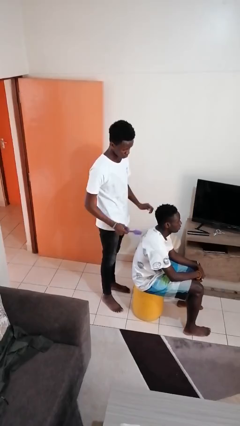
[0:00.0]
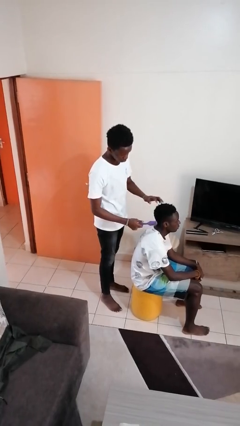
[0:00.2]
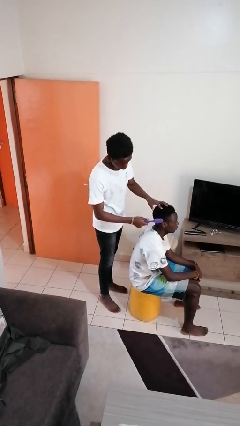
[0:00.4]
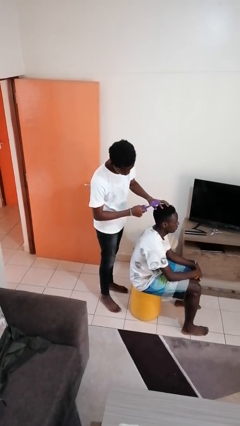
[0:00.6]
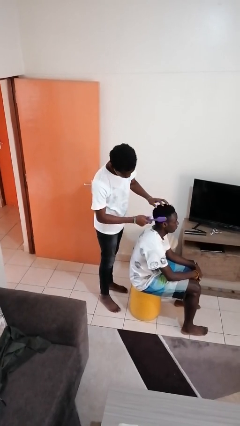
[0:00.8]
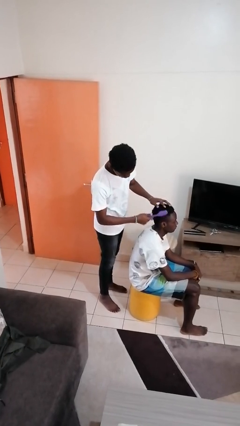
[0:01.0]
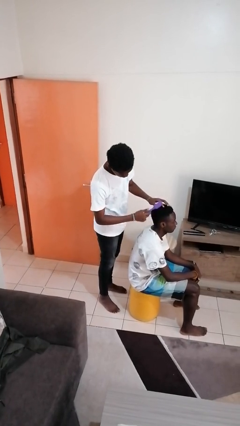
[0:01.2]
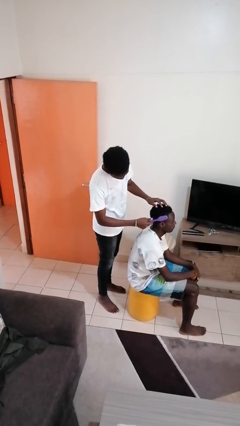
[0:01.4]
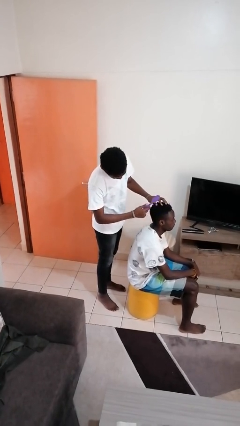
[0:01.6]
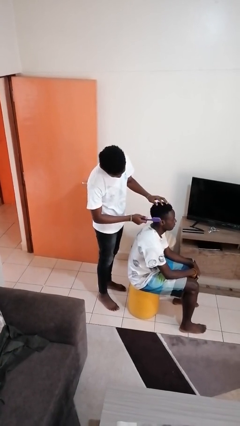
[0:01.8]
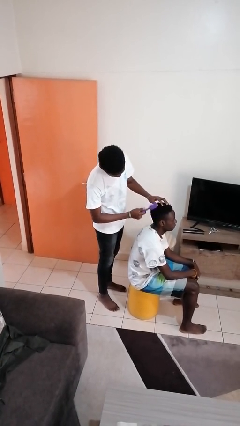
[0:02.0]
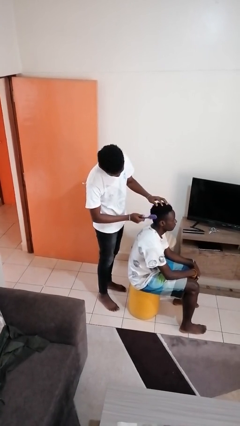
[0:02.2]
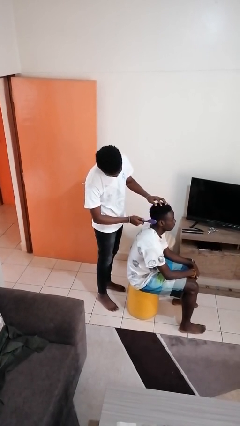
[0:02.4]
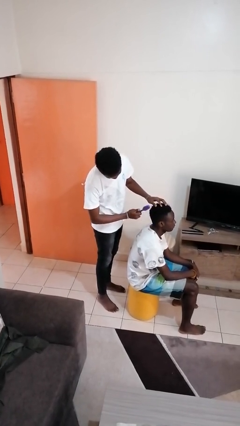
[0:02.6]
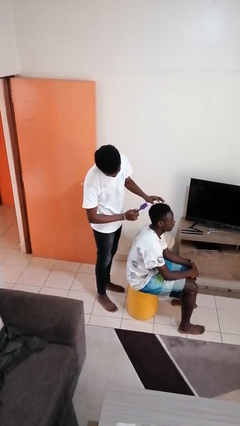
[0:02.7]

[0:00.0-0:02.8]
person brushes hair of person

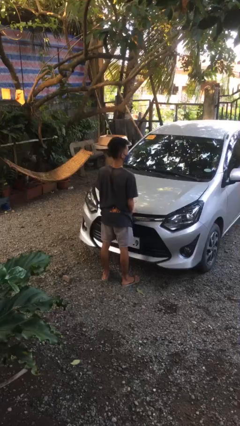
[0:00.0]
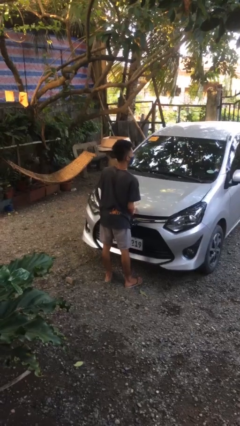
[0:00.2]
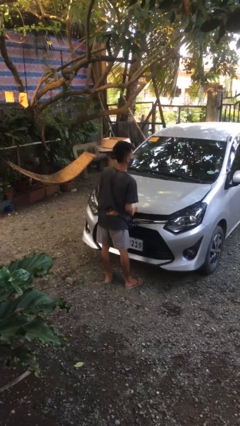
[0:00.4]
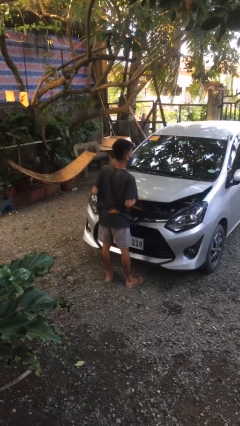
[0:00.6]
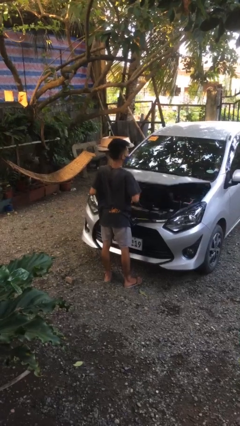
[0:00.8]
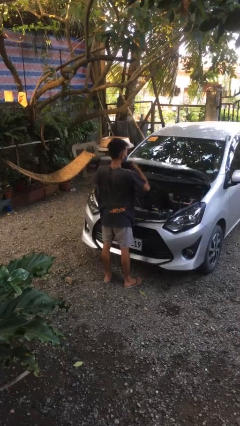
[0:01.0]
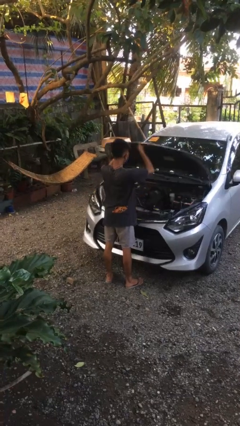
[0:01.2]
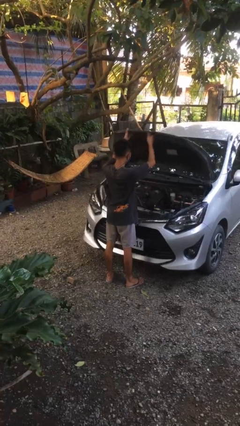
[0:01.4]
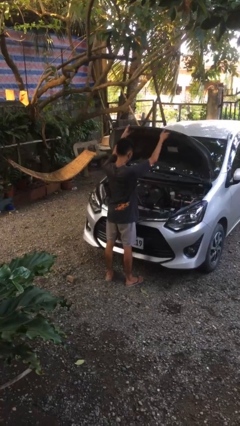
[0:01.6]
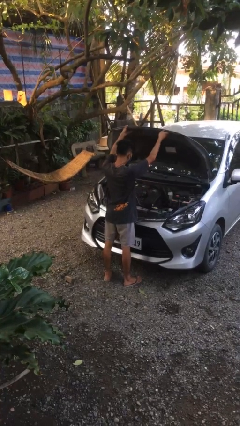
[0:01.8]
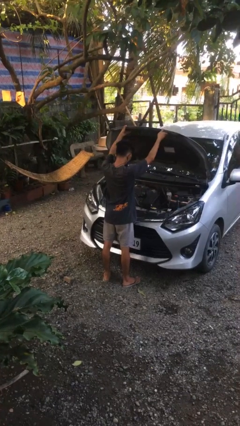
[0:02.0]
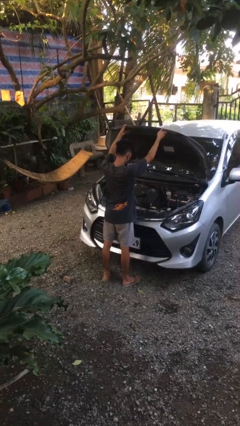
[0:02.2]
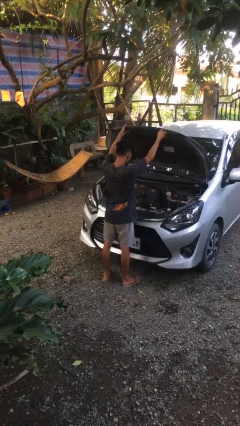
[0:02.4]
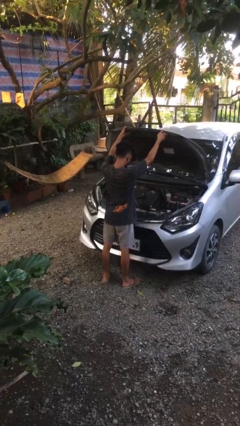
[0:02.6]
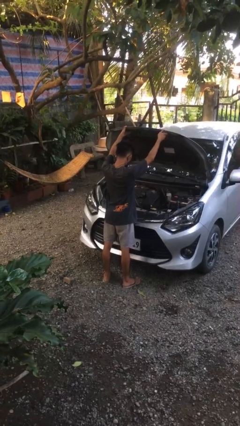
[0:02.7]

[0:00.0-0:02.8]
person opens car hood

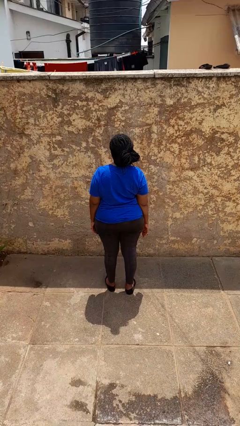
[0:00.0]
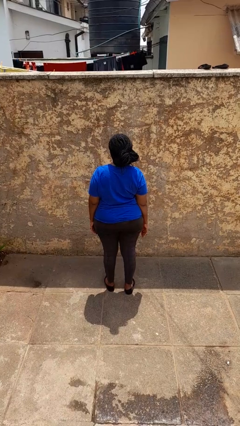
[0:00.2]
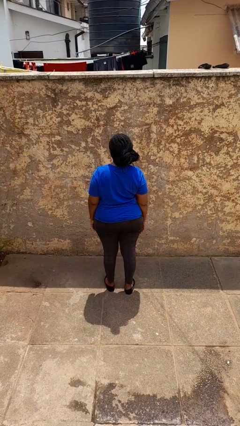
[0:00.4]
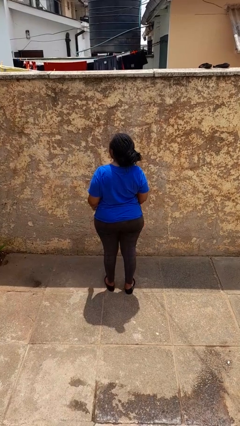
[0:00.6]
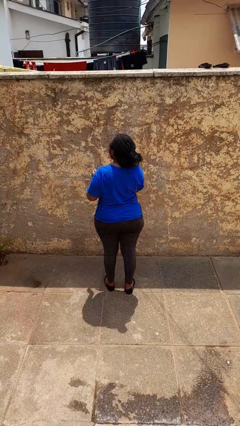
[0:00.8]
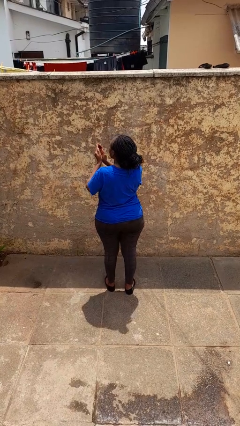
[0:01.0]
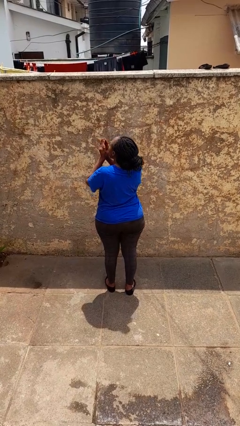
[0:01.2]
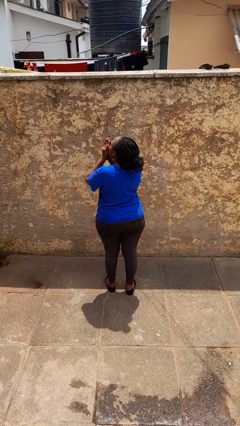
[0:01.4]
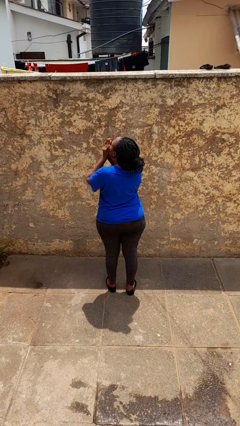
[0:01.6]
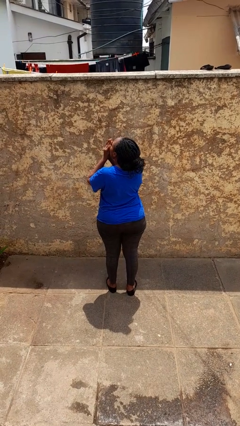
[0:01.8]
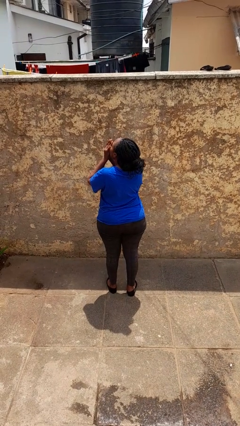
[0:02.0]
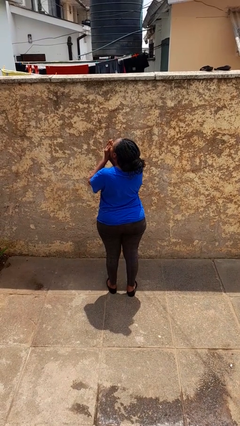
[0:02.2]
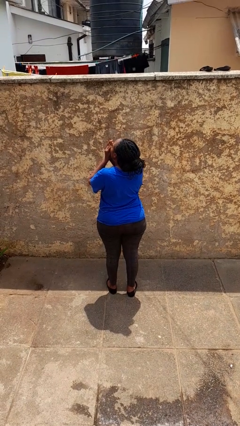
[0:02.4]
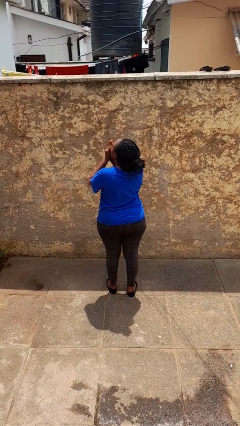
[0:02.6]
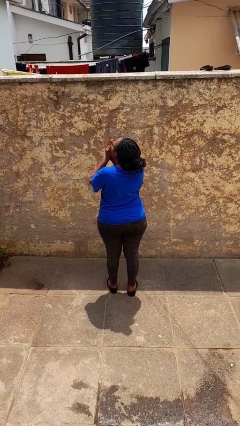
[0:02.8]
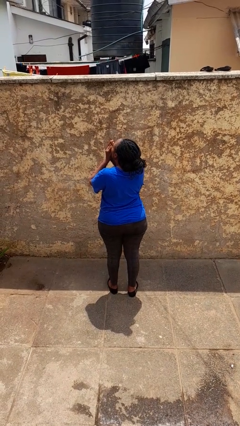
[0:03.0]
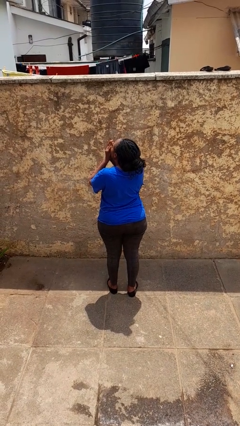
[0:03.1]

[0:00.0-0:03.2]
person blows into hands

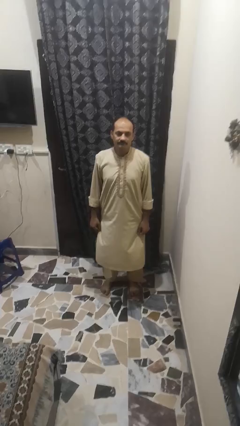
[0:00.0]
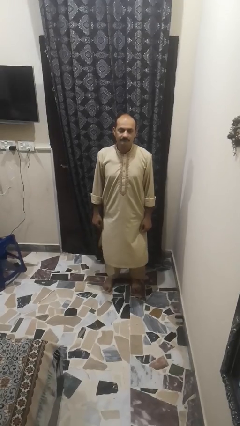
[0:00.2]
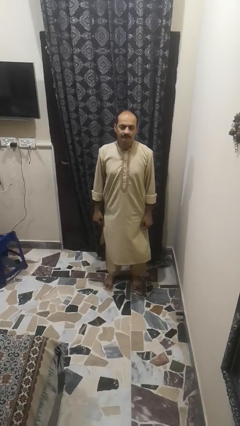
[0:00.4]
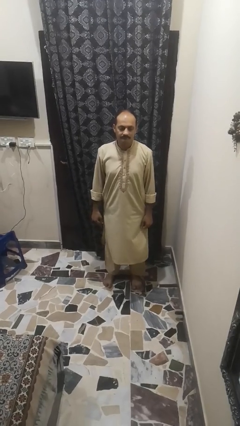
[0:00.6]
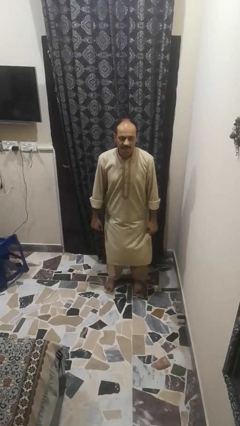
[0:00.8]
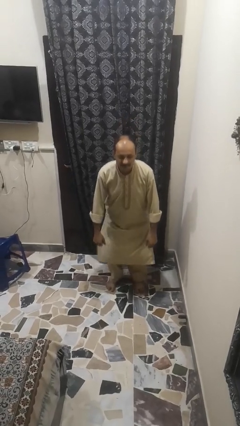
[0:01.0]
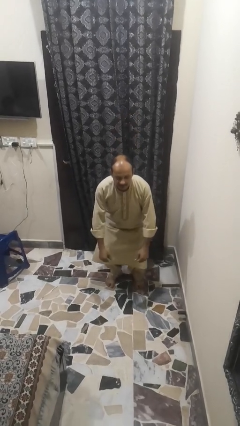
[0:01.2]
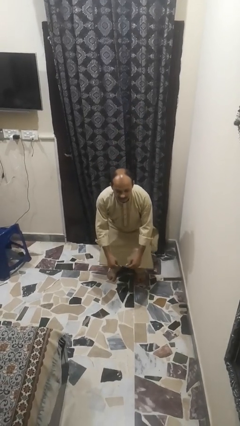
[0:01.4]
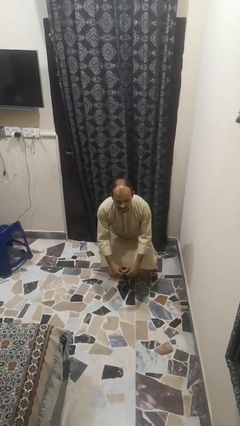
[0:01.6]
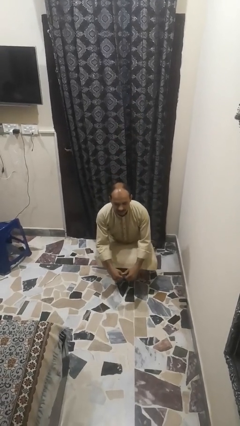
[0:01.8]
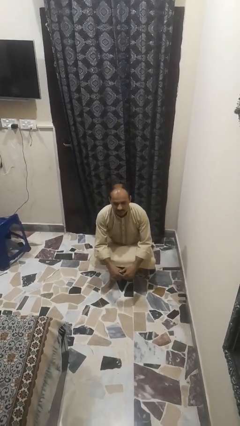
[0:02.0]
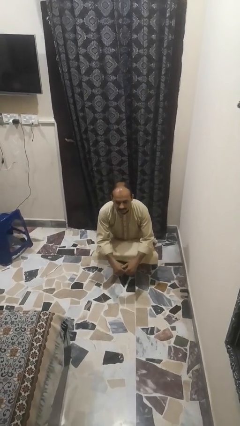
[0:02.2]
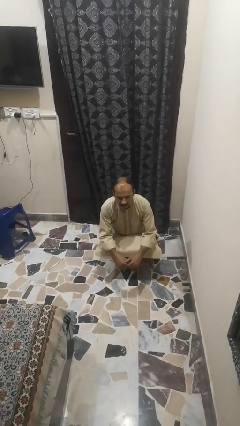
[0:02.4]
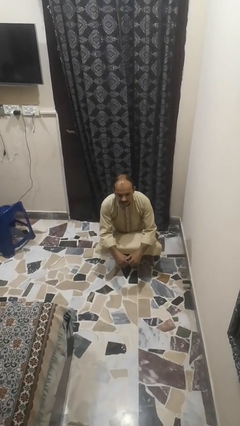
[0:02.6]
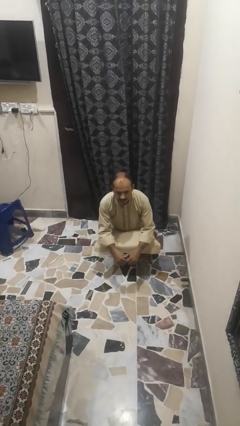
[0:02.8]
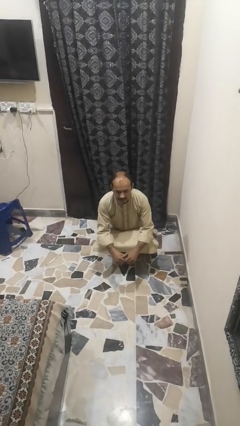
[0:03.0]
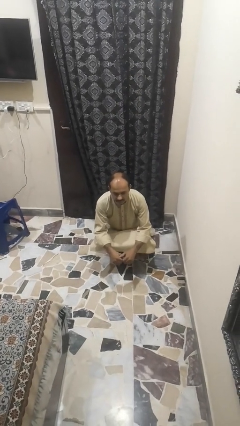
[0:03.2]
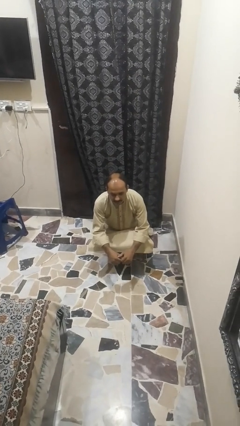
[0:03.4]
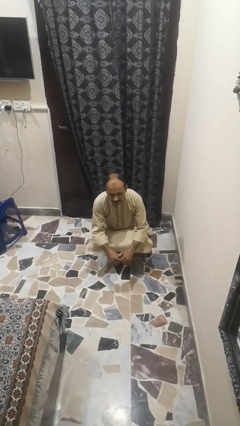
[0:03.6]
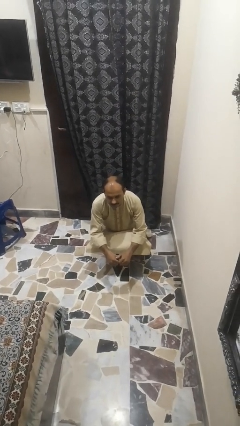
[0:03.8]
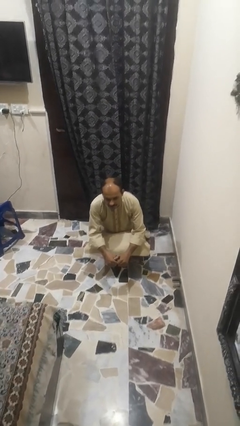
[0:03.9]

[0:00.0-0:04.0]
person squats

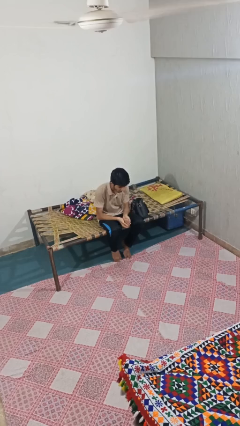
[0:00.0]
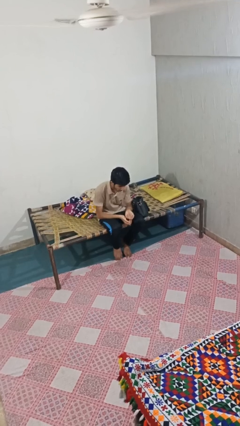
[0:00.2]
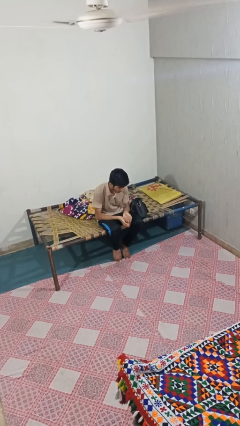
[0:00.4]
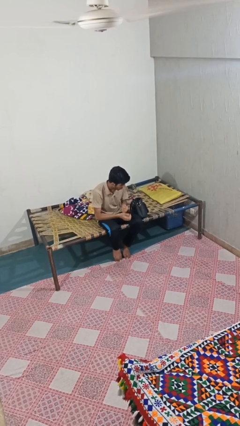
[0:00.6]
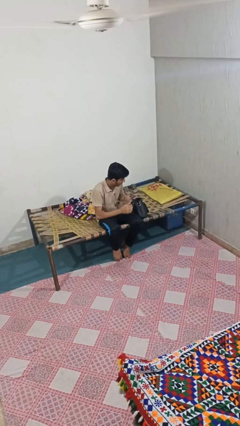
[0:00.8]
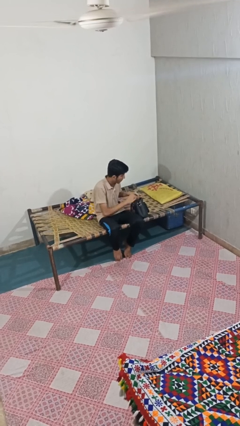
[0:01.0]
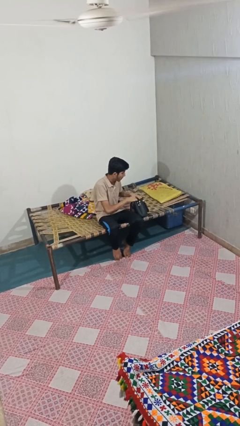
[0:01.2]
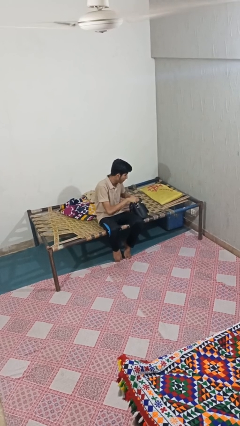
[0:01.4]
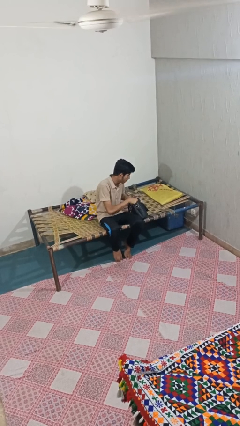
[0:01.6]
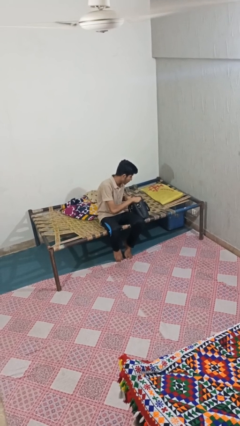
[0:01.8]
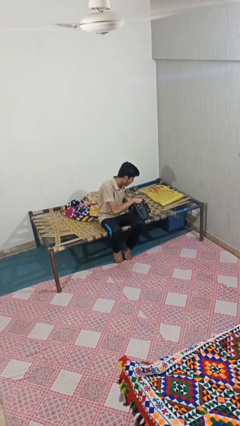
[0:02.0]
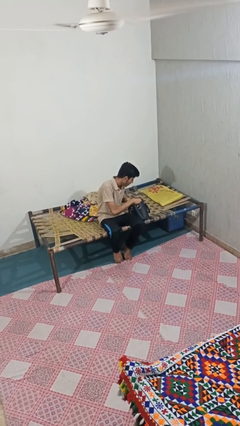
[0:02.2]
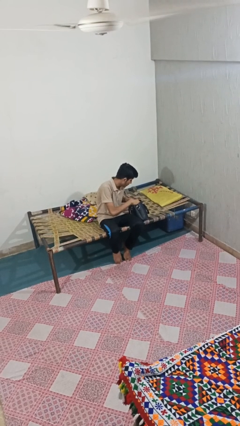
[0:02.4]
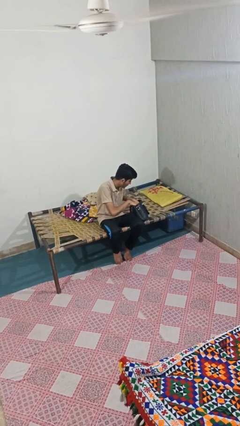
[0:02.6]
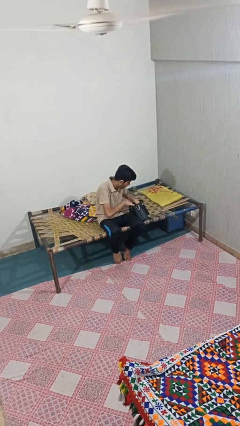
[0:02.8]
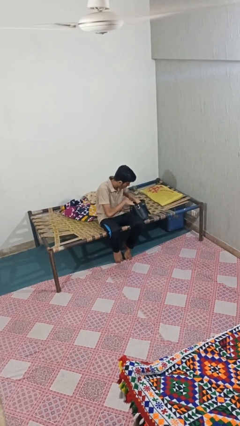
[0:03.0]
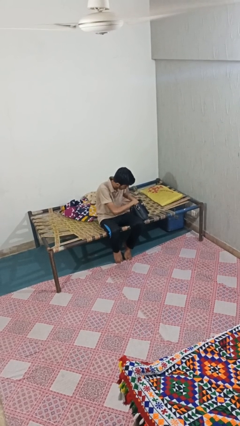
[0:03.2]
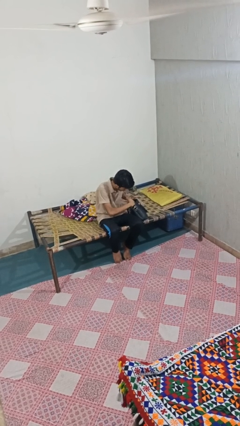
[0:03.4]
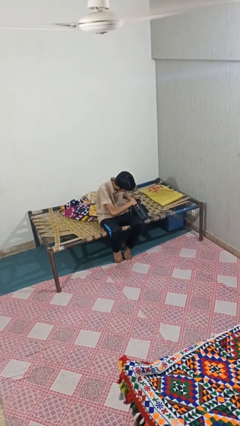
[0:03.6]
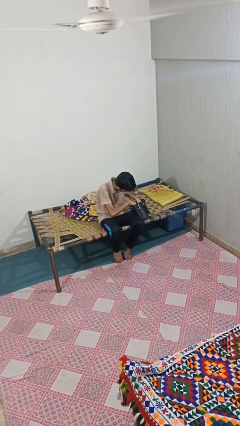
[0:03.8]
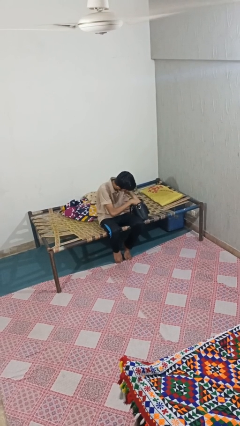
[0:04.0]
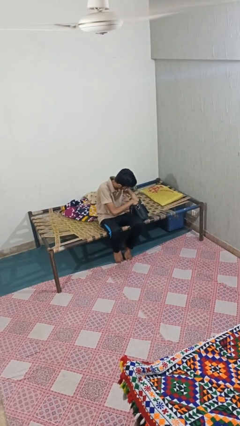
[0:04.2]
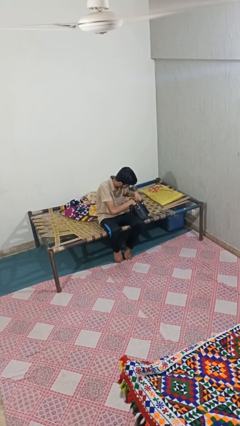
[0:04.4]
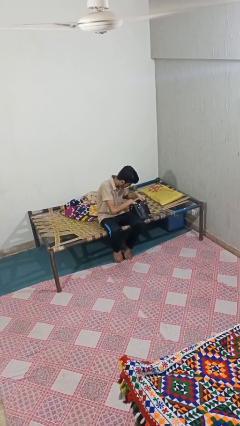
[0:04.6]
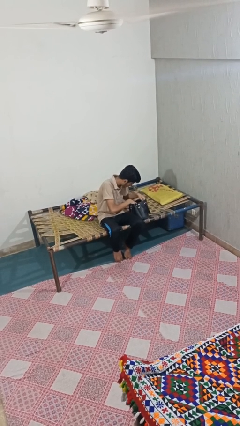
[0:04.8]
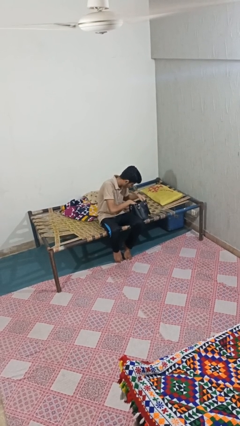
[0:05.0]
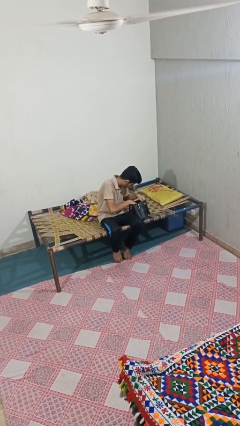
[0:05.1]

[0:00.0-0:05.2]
person searches in purse
